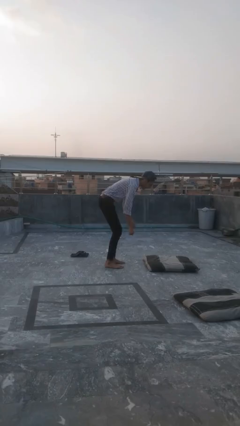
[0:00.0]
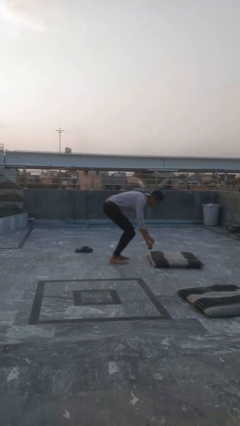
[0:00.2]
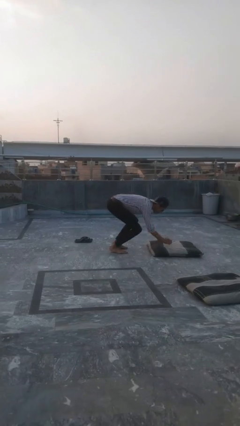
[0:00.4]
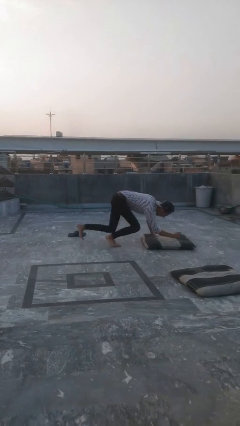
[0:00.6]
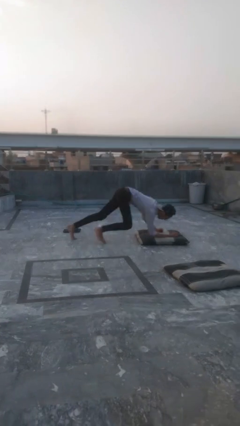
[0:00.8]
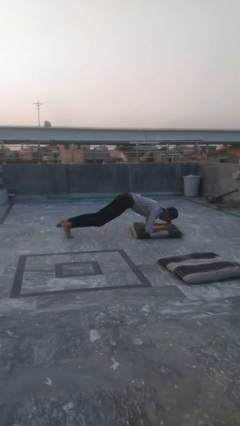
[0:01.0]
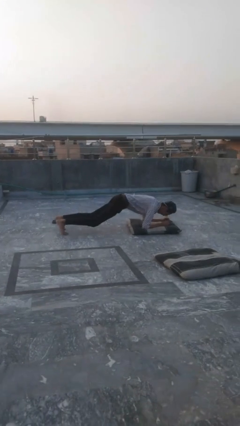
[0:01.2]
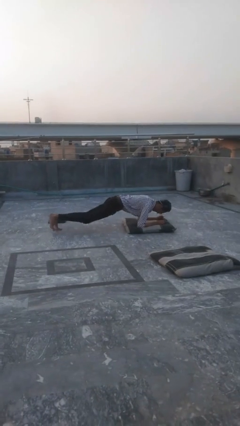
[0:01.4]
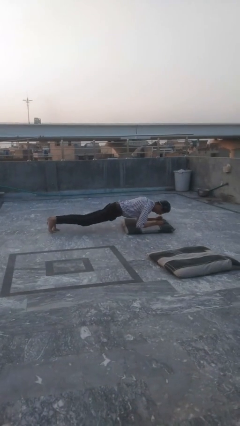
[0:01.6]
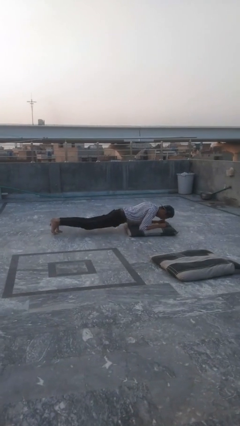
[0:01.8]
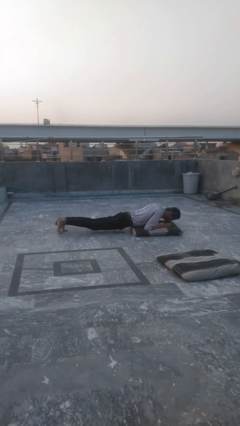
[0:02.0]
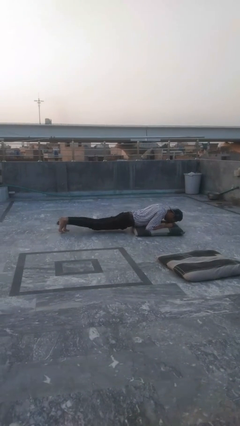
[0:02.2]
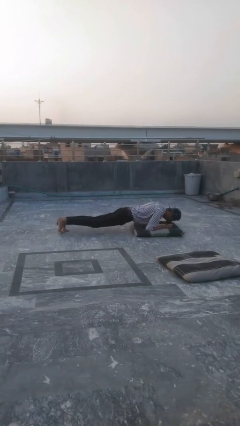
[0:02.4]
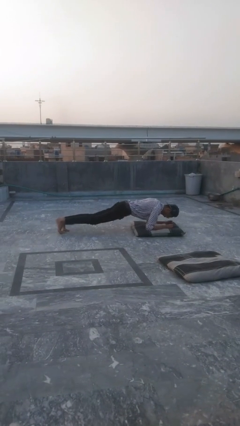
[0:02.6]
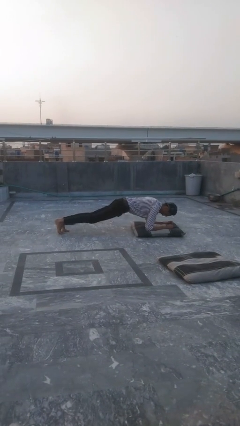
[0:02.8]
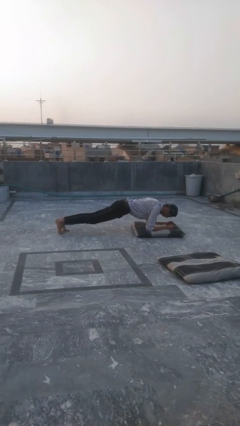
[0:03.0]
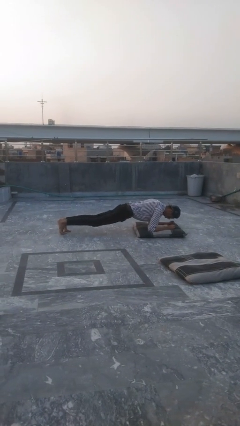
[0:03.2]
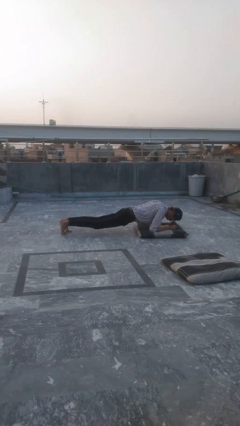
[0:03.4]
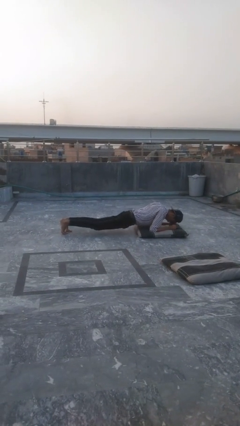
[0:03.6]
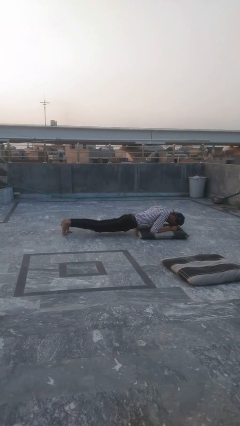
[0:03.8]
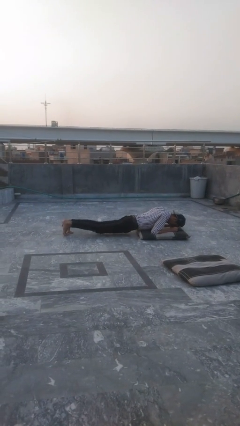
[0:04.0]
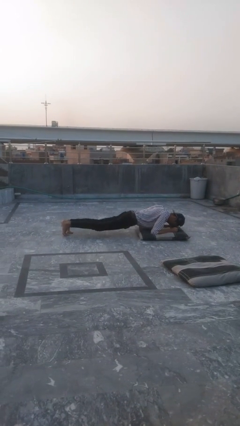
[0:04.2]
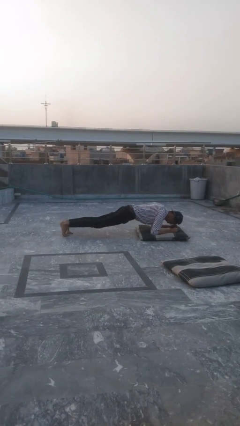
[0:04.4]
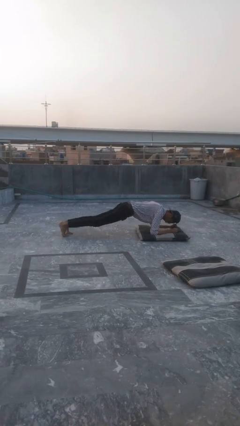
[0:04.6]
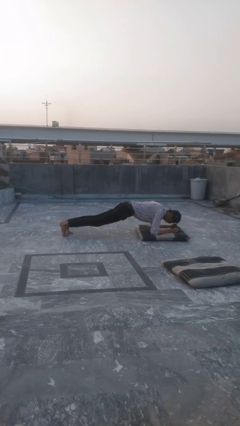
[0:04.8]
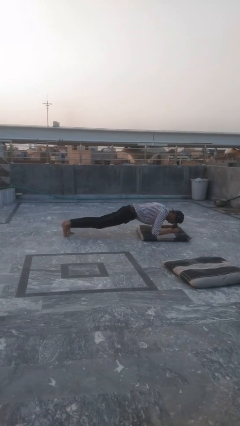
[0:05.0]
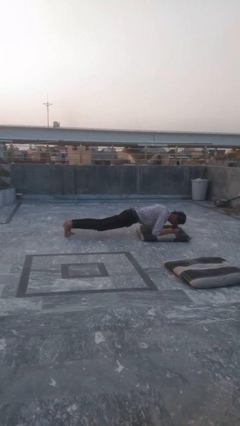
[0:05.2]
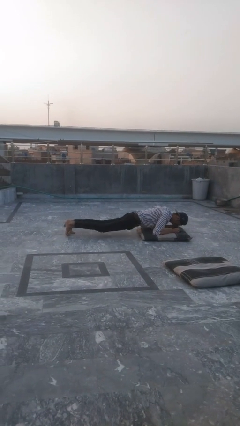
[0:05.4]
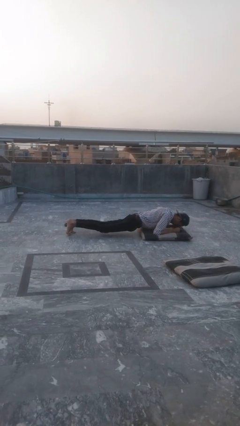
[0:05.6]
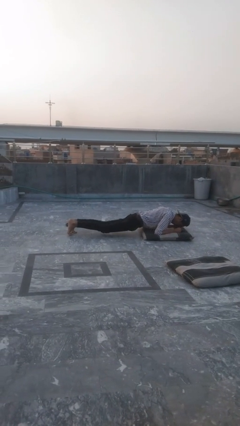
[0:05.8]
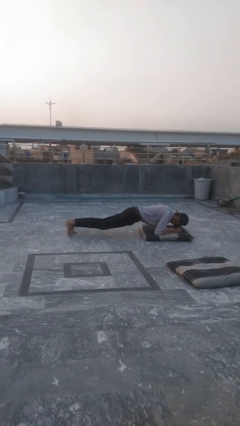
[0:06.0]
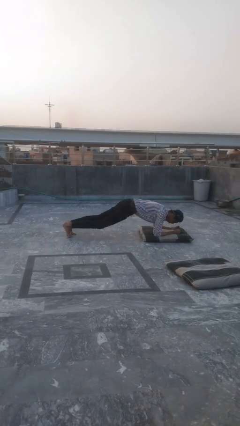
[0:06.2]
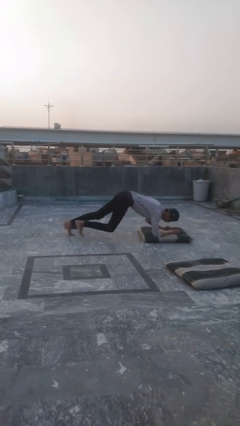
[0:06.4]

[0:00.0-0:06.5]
person exercises with plank

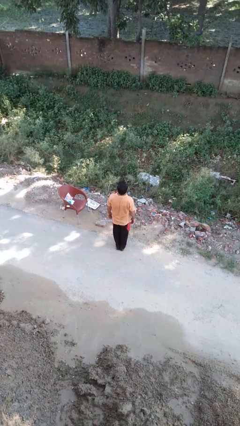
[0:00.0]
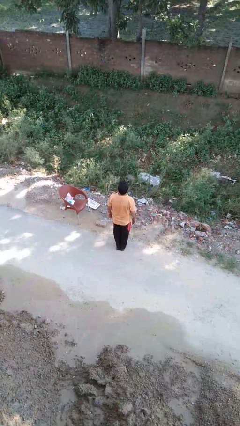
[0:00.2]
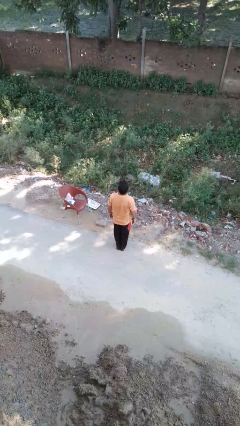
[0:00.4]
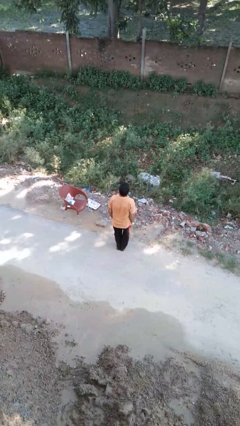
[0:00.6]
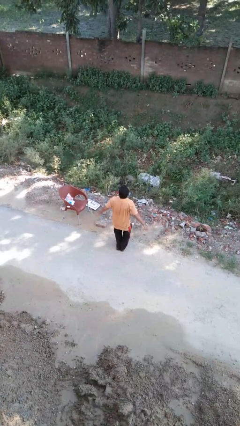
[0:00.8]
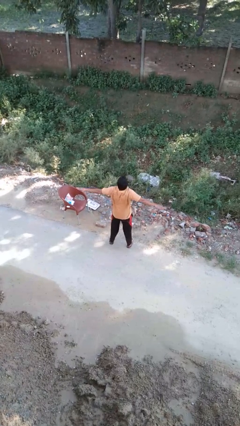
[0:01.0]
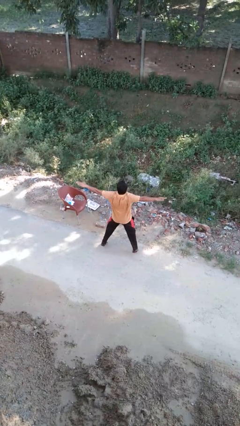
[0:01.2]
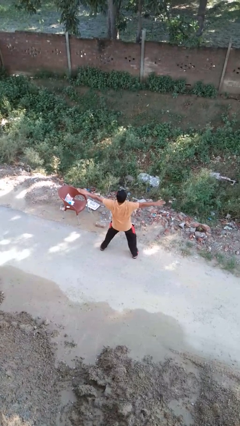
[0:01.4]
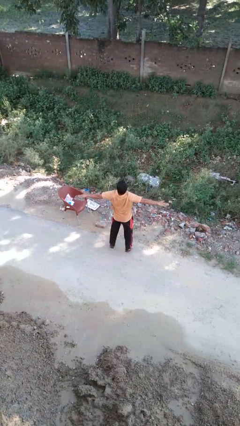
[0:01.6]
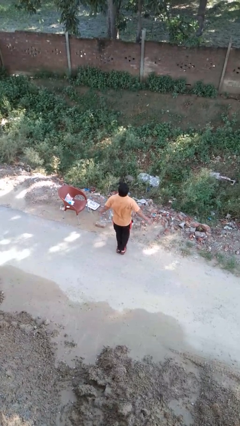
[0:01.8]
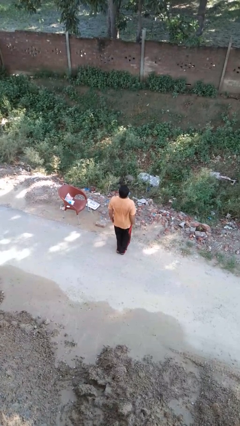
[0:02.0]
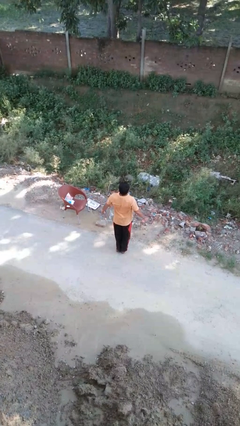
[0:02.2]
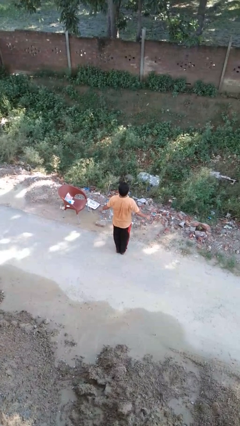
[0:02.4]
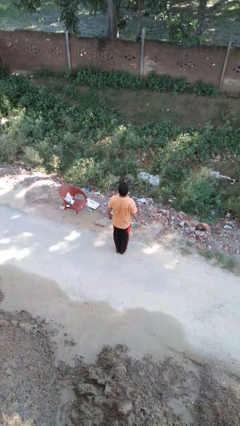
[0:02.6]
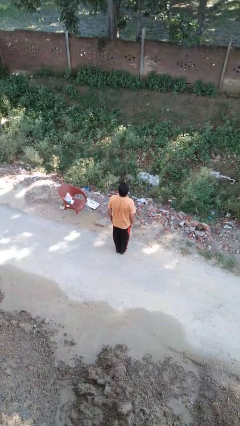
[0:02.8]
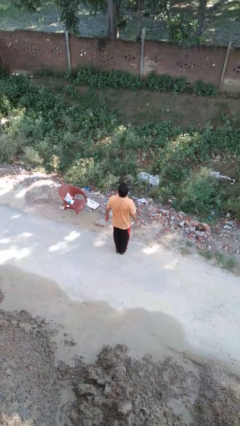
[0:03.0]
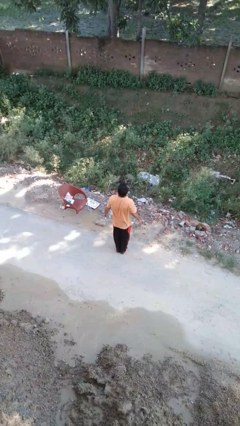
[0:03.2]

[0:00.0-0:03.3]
person exercises with jumping jacks

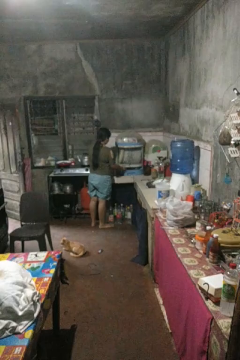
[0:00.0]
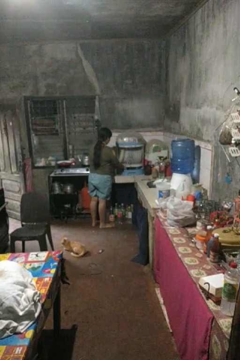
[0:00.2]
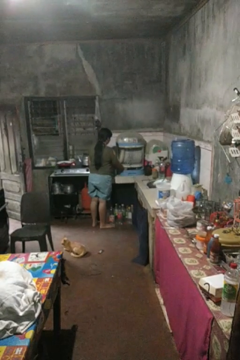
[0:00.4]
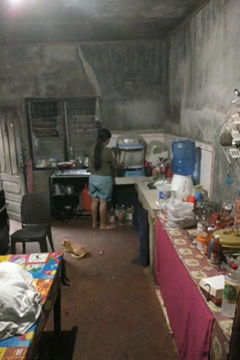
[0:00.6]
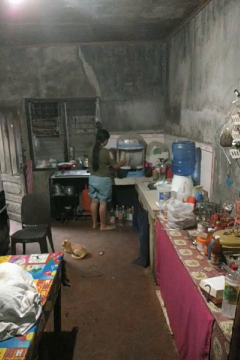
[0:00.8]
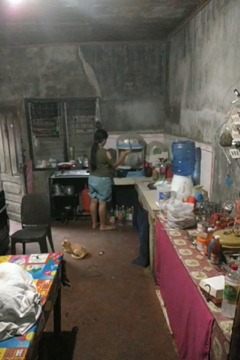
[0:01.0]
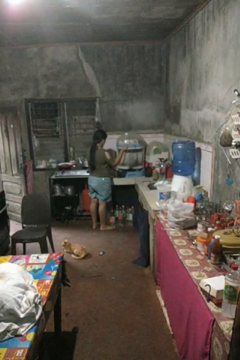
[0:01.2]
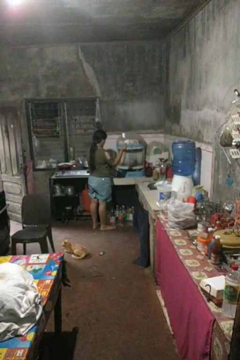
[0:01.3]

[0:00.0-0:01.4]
person takes object from kitchen drawer

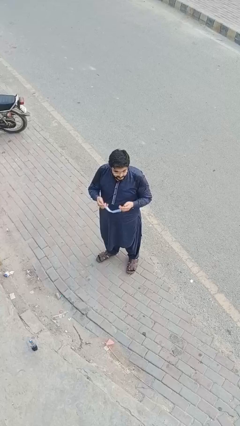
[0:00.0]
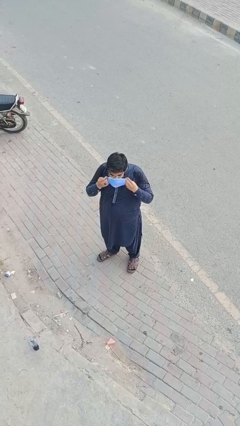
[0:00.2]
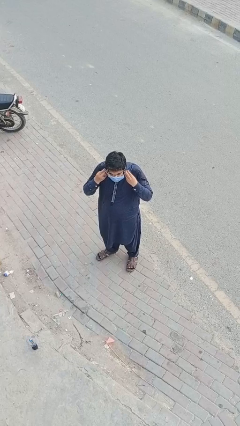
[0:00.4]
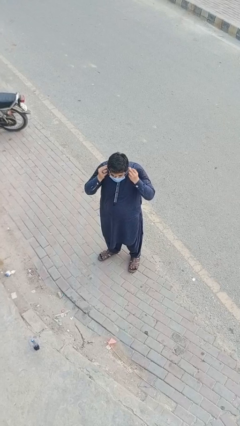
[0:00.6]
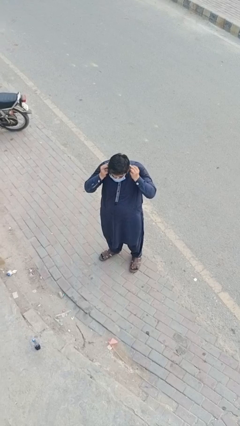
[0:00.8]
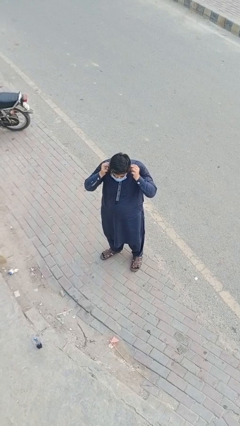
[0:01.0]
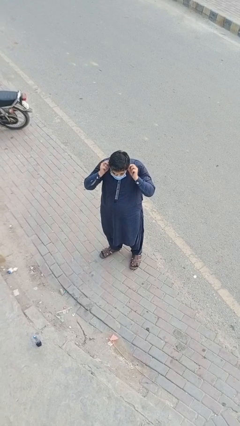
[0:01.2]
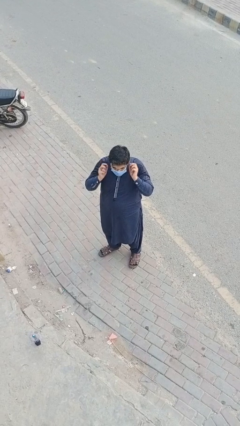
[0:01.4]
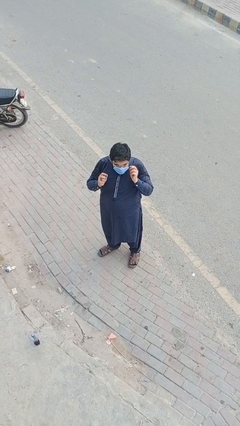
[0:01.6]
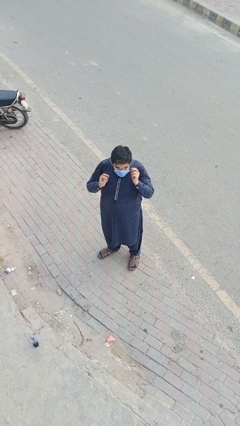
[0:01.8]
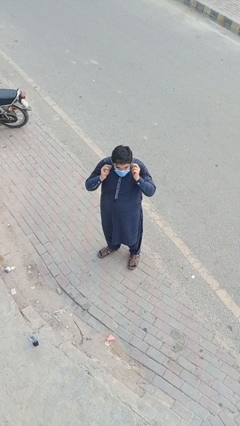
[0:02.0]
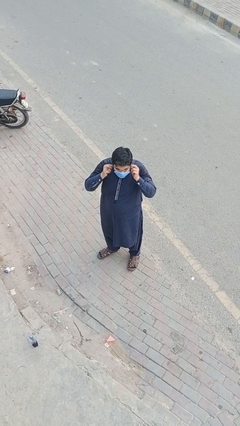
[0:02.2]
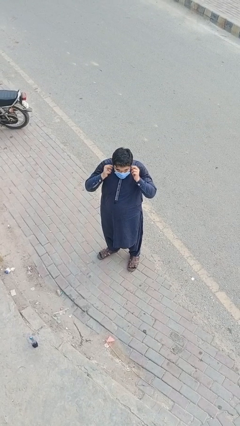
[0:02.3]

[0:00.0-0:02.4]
person puts on facemask

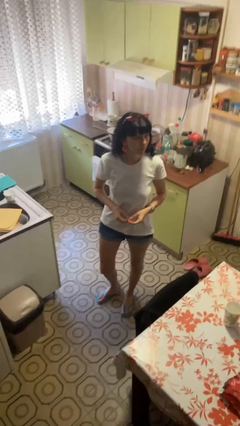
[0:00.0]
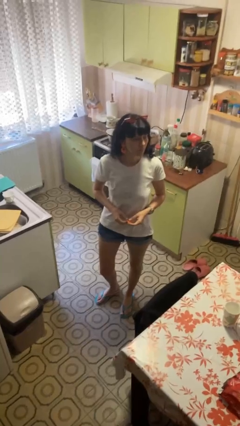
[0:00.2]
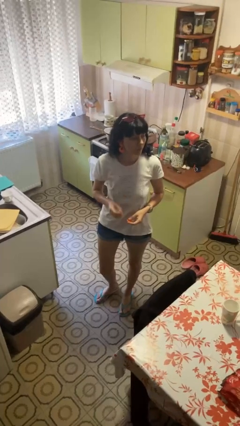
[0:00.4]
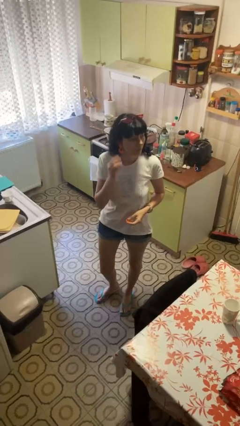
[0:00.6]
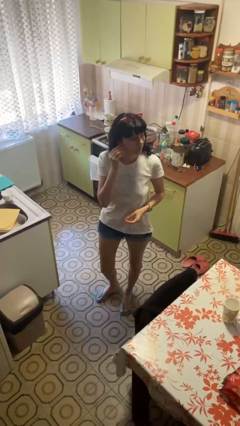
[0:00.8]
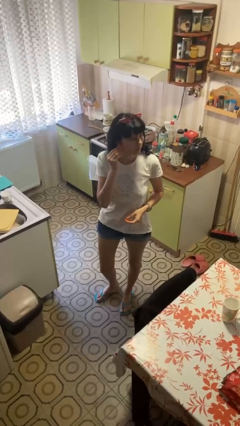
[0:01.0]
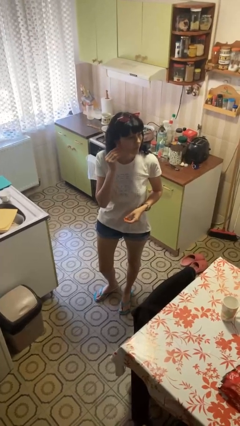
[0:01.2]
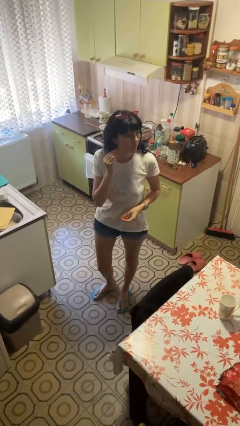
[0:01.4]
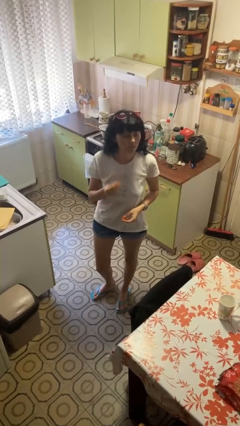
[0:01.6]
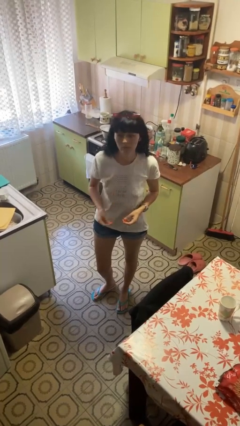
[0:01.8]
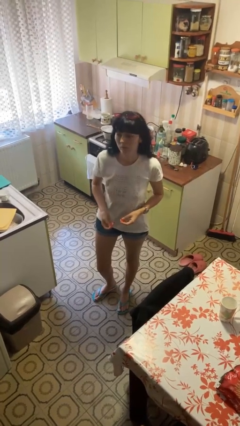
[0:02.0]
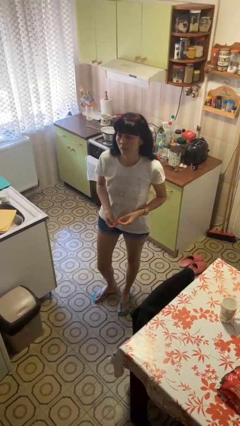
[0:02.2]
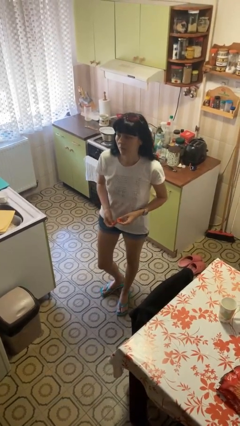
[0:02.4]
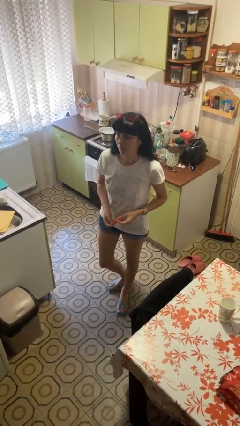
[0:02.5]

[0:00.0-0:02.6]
person takes off earrings

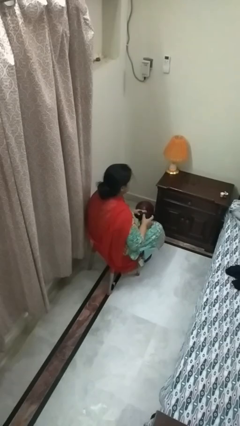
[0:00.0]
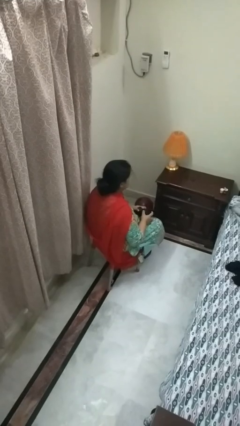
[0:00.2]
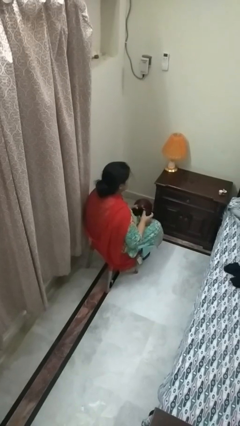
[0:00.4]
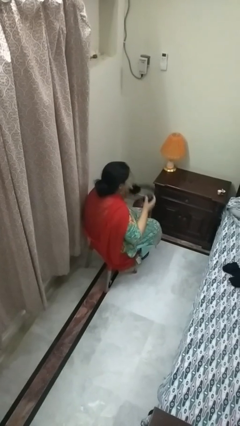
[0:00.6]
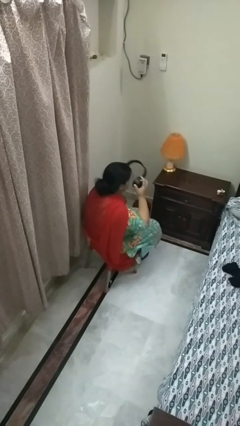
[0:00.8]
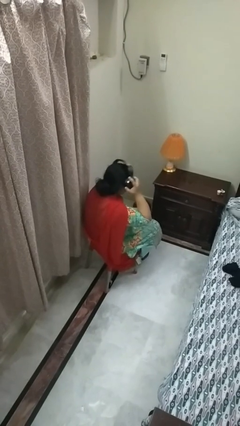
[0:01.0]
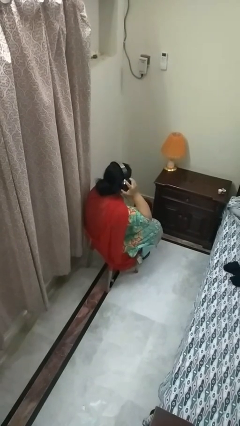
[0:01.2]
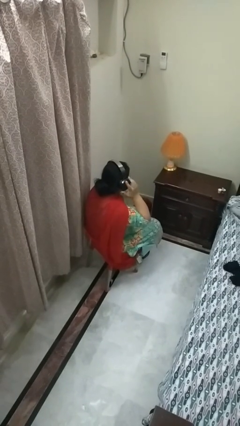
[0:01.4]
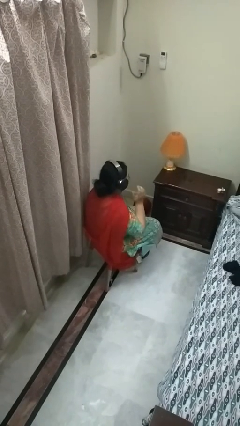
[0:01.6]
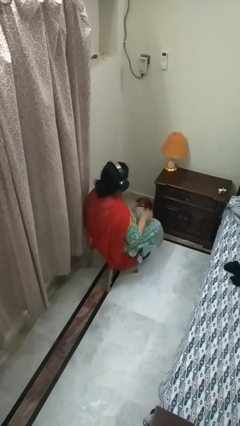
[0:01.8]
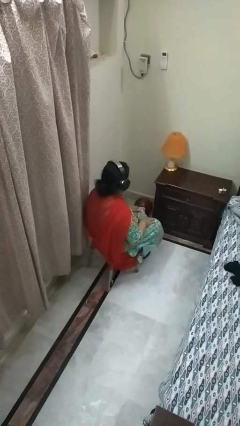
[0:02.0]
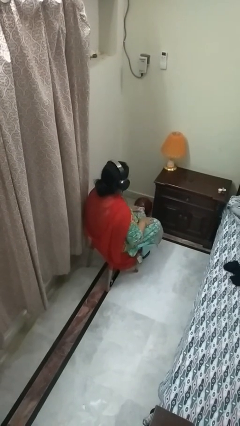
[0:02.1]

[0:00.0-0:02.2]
person puts on headphones
